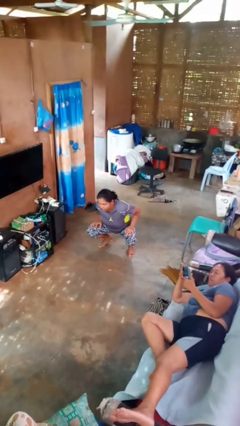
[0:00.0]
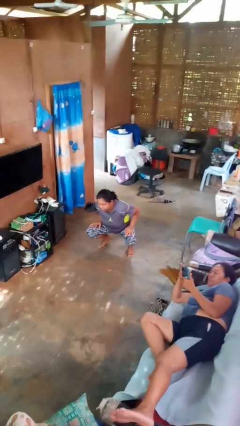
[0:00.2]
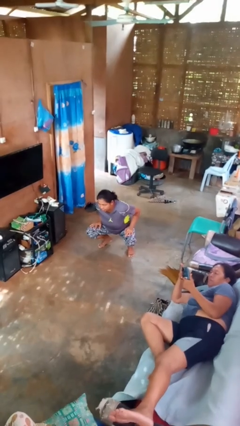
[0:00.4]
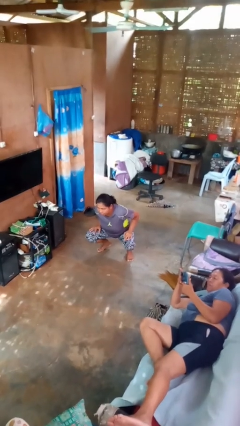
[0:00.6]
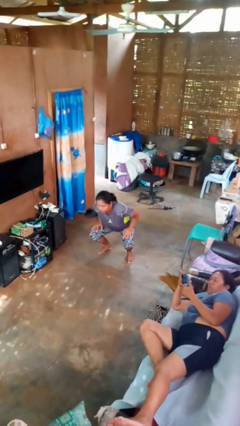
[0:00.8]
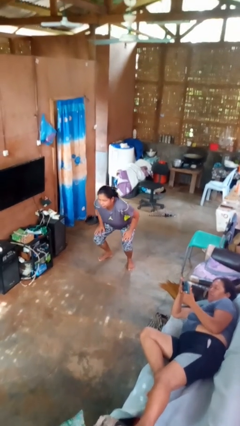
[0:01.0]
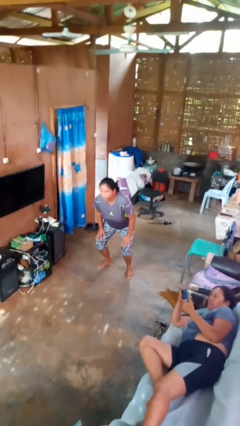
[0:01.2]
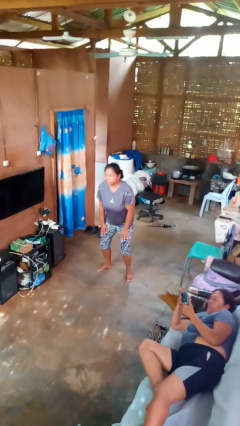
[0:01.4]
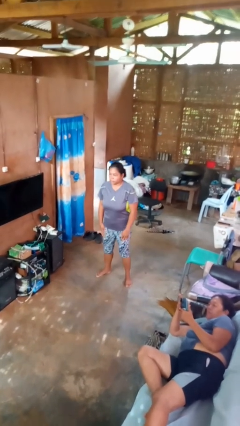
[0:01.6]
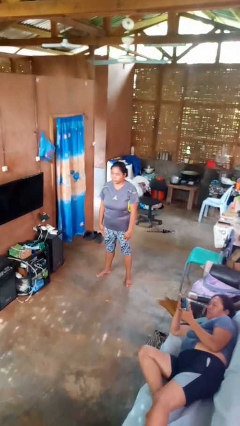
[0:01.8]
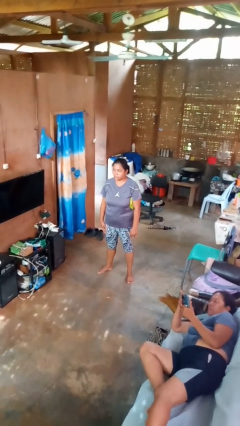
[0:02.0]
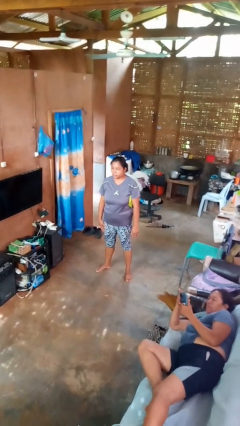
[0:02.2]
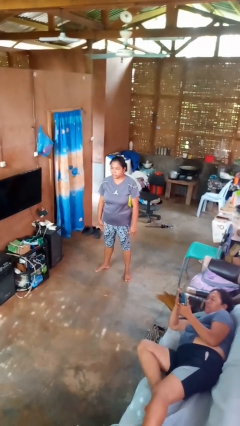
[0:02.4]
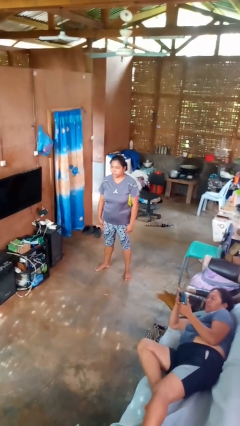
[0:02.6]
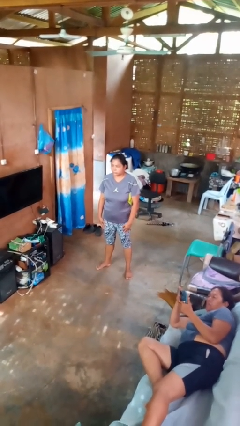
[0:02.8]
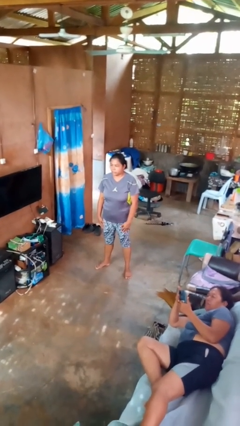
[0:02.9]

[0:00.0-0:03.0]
person stands up

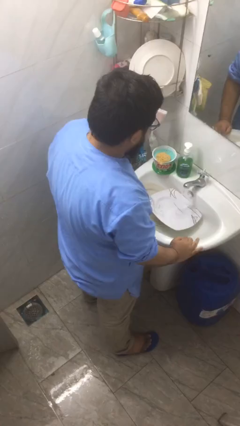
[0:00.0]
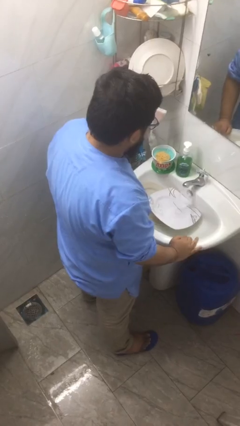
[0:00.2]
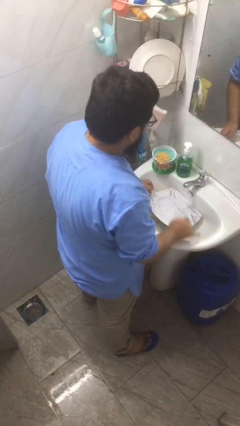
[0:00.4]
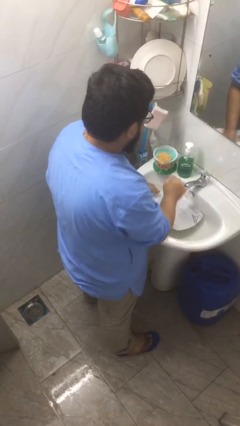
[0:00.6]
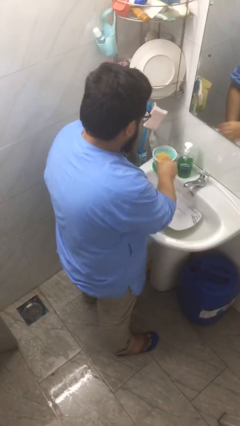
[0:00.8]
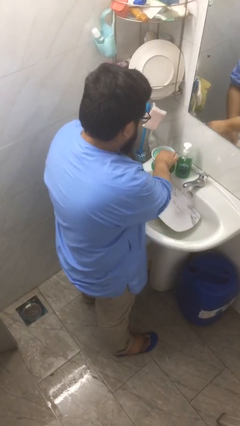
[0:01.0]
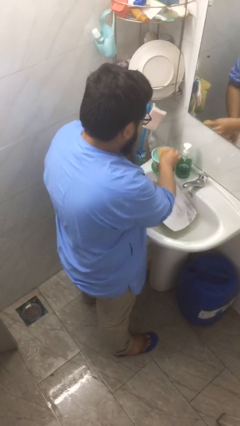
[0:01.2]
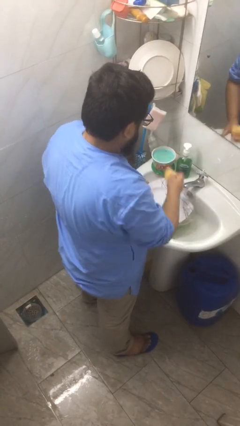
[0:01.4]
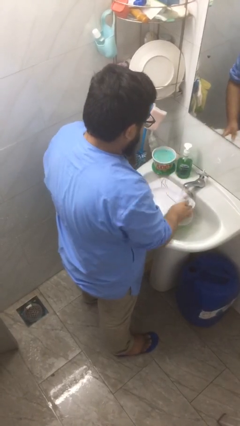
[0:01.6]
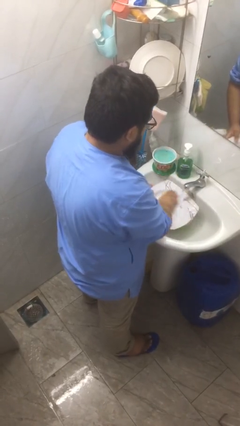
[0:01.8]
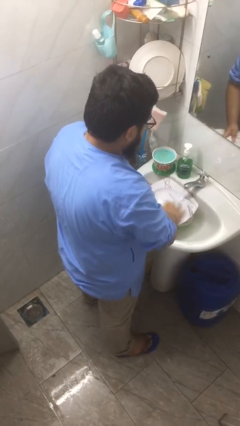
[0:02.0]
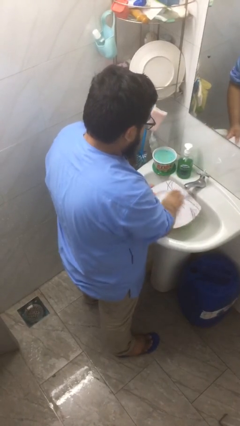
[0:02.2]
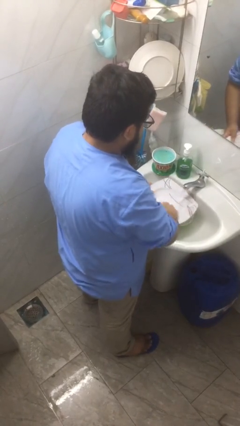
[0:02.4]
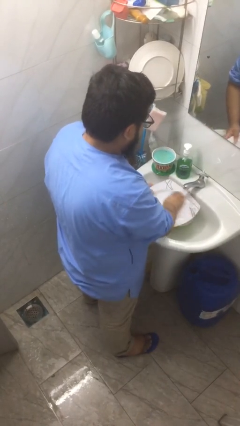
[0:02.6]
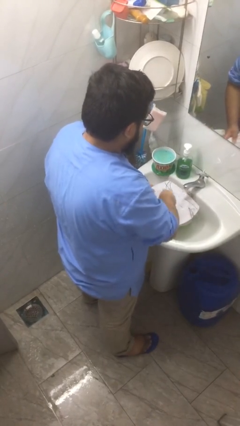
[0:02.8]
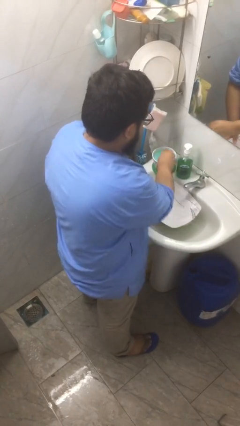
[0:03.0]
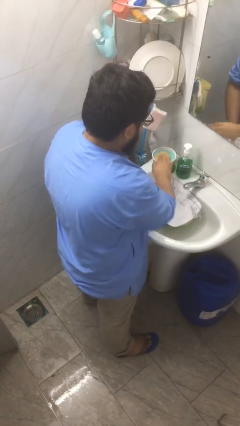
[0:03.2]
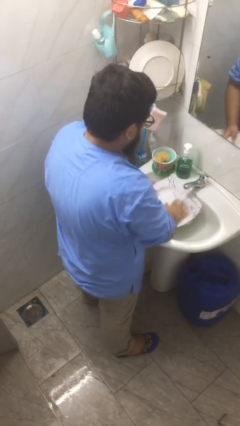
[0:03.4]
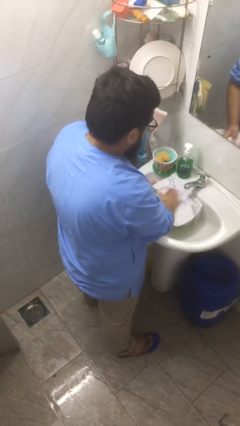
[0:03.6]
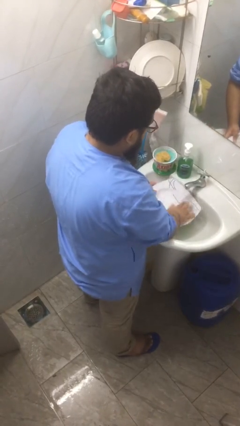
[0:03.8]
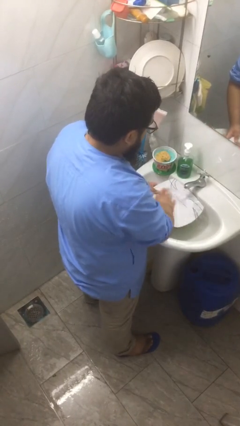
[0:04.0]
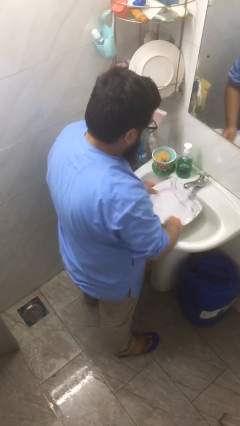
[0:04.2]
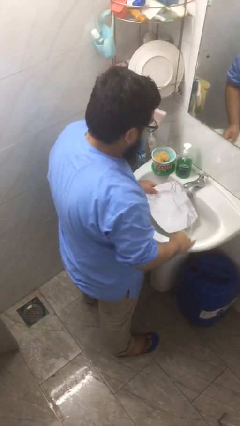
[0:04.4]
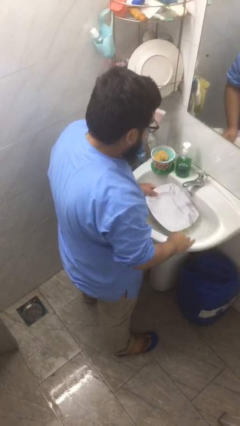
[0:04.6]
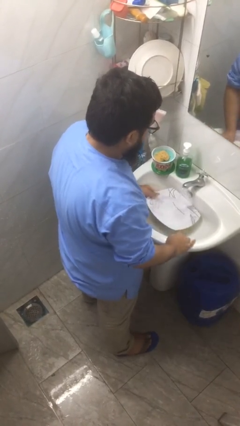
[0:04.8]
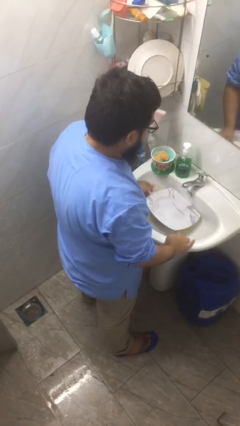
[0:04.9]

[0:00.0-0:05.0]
person washes dish

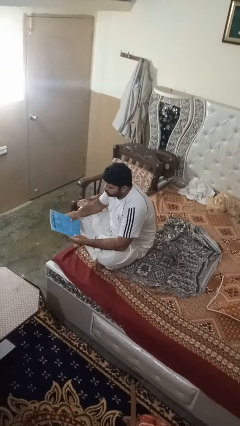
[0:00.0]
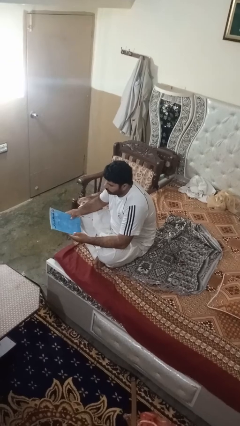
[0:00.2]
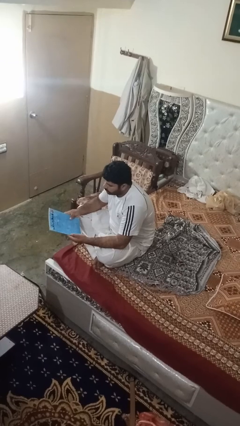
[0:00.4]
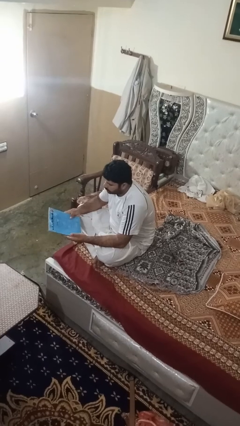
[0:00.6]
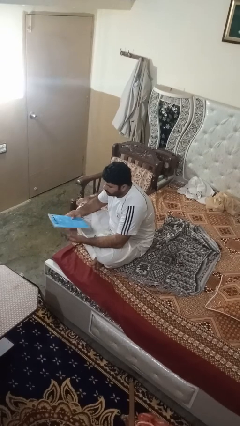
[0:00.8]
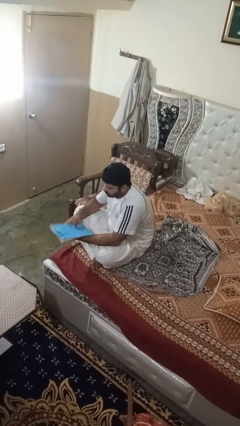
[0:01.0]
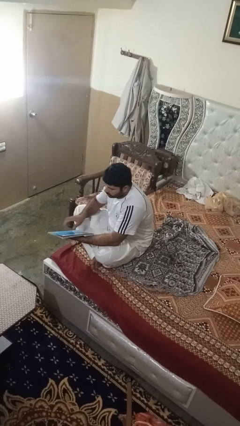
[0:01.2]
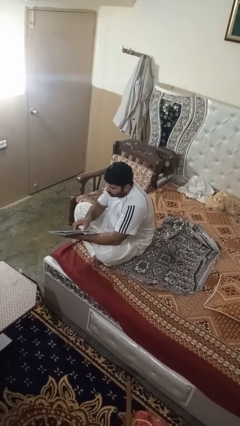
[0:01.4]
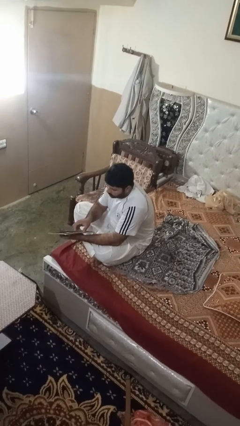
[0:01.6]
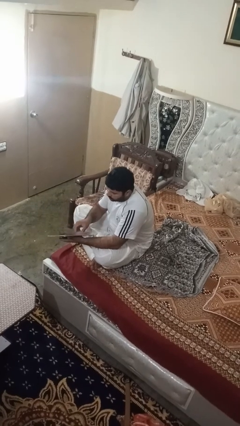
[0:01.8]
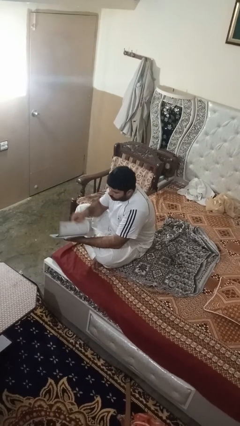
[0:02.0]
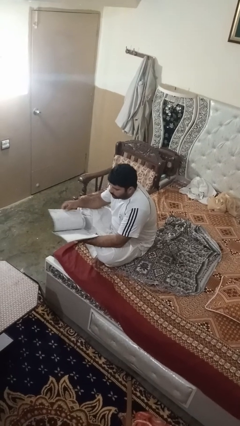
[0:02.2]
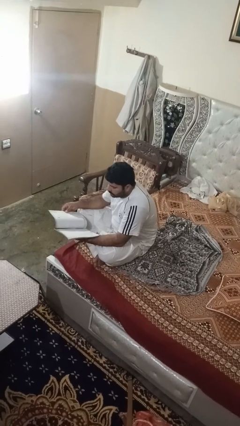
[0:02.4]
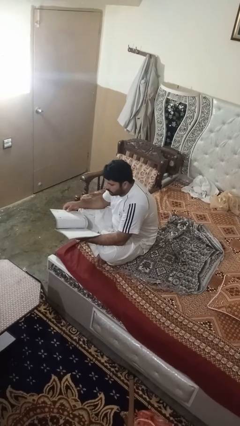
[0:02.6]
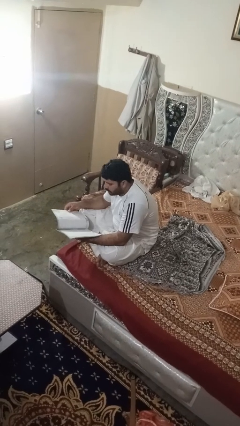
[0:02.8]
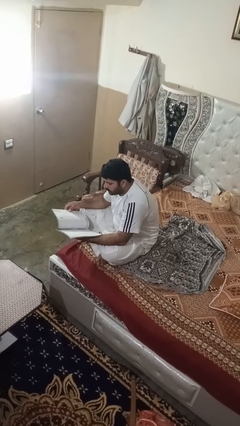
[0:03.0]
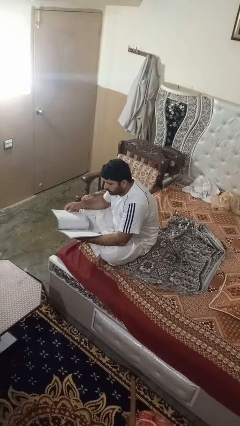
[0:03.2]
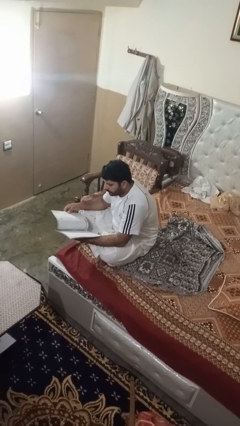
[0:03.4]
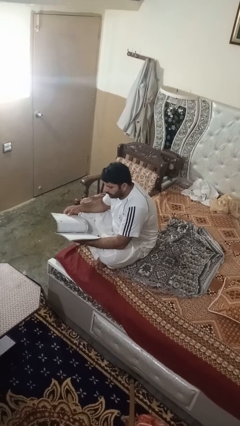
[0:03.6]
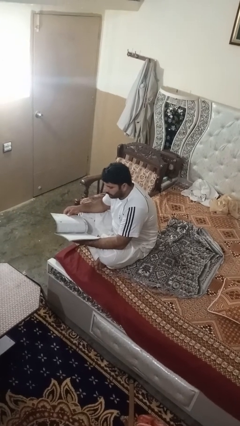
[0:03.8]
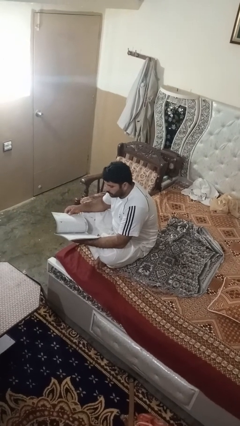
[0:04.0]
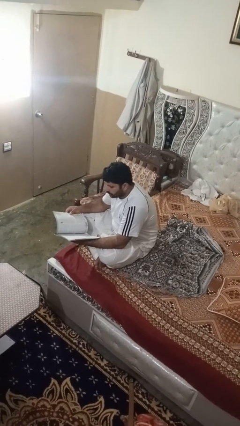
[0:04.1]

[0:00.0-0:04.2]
person reads magazine

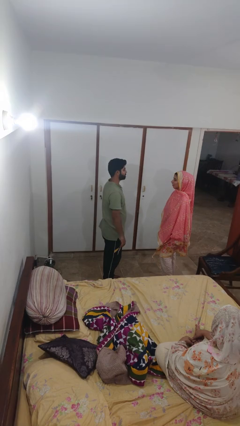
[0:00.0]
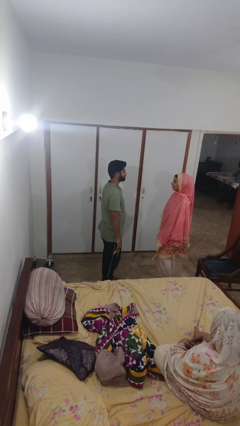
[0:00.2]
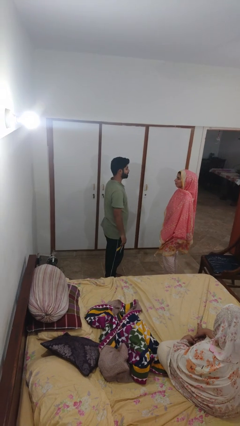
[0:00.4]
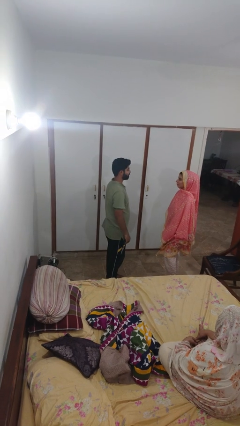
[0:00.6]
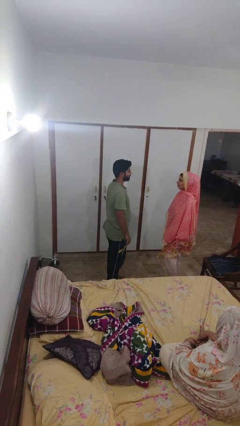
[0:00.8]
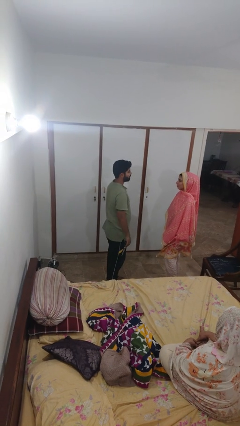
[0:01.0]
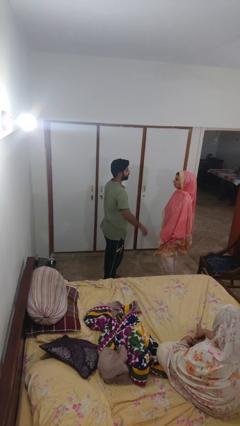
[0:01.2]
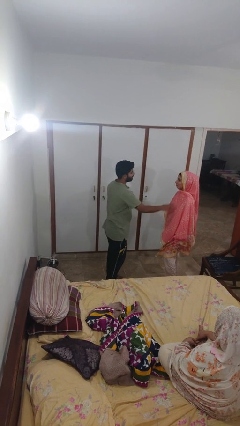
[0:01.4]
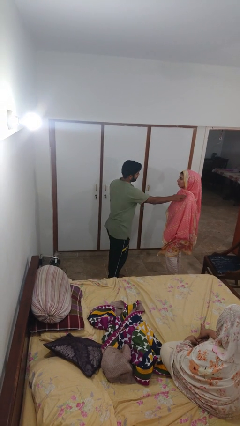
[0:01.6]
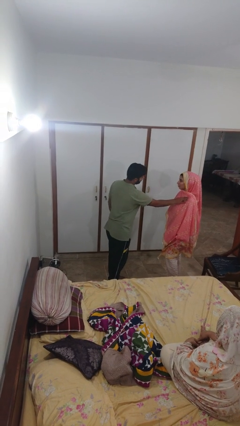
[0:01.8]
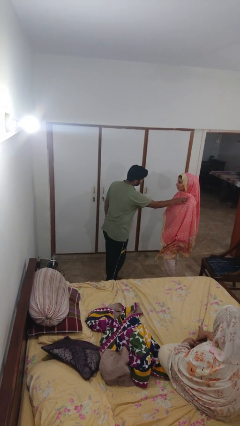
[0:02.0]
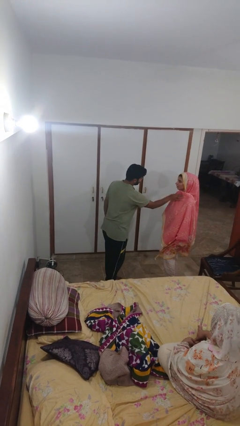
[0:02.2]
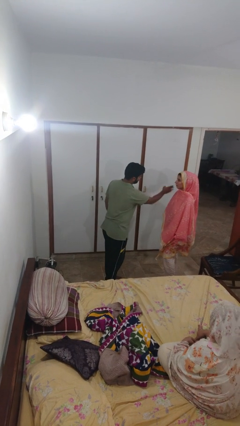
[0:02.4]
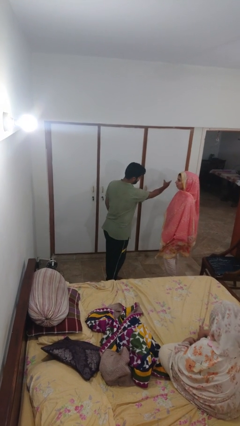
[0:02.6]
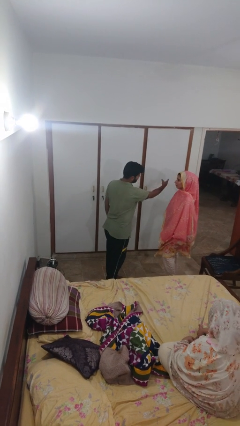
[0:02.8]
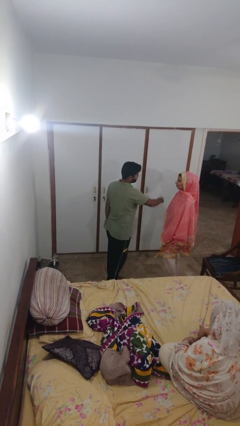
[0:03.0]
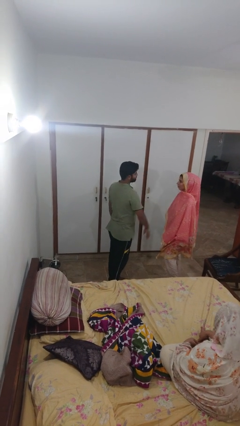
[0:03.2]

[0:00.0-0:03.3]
person shoves person

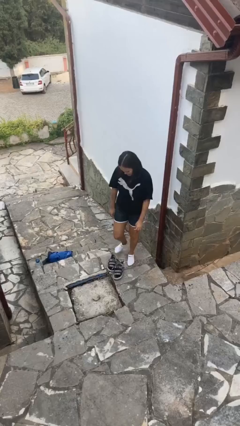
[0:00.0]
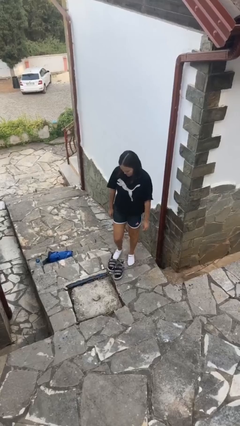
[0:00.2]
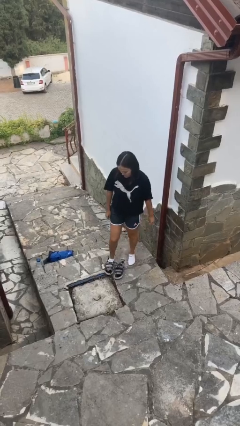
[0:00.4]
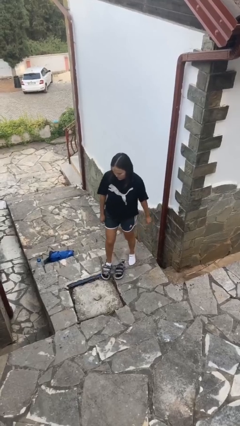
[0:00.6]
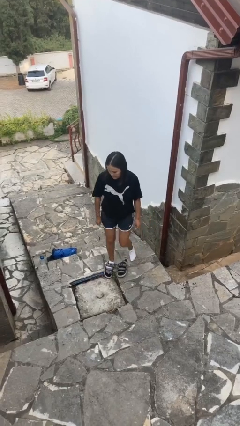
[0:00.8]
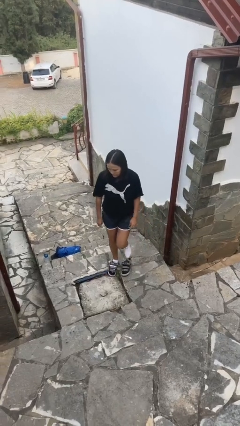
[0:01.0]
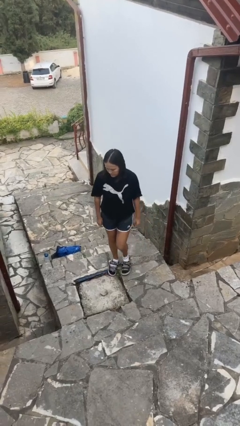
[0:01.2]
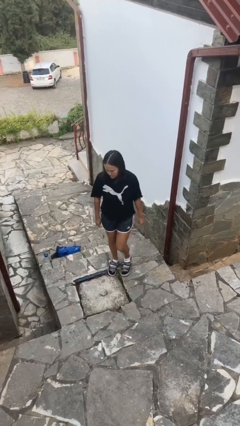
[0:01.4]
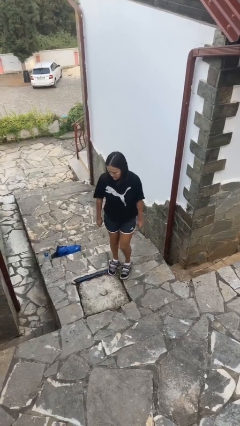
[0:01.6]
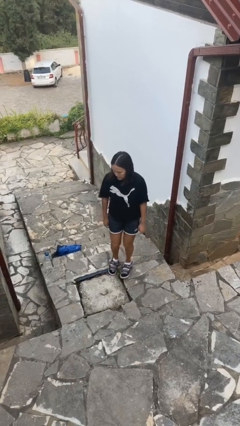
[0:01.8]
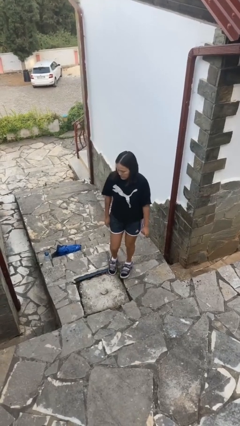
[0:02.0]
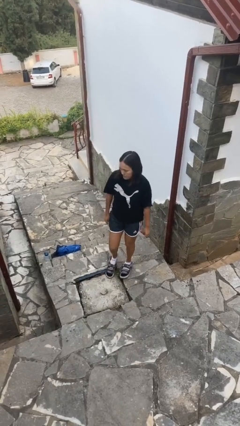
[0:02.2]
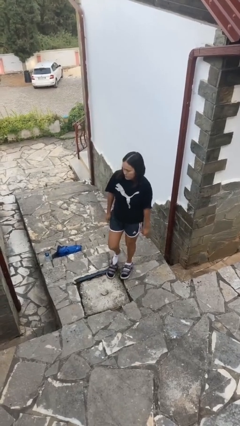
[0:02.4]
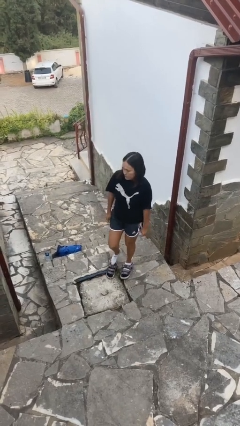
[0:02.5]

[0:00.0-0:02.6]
person puts on shoes

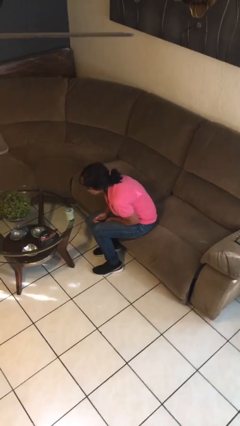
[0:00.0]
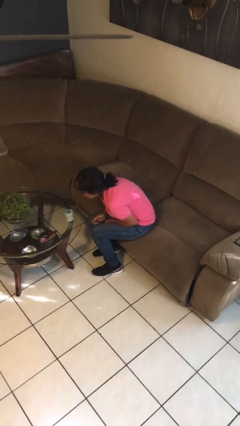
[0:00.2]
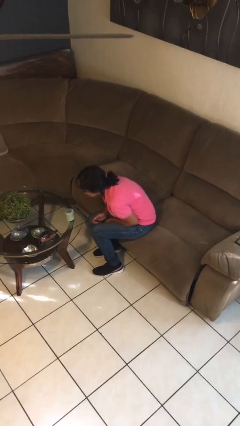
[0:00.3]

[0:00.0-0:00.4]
person extinguishes candle
